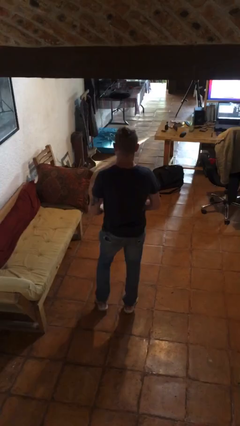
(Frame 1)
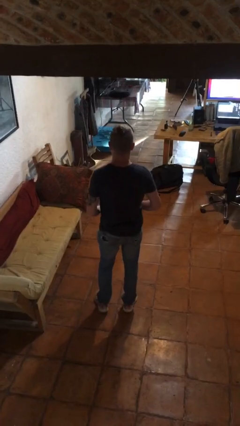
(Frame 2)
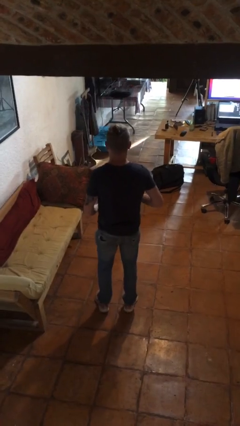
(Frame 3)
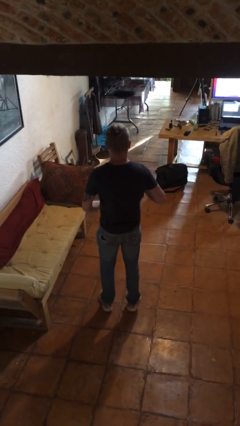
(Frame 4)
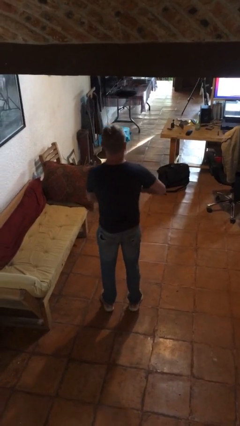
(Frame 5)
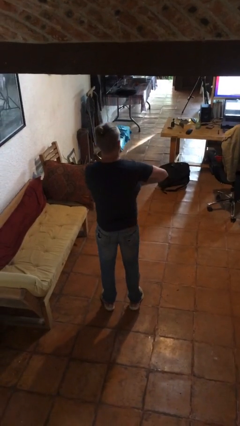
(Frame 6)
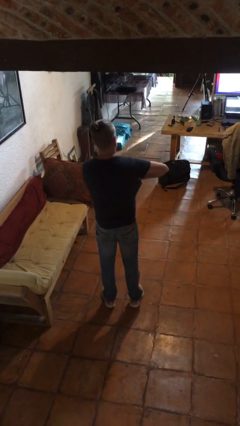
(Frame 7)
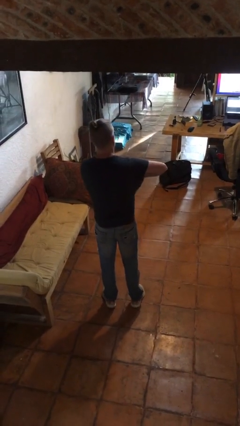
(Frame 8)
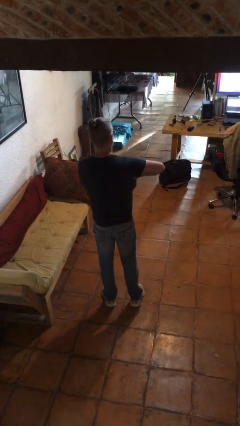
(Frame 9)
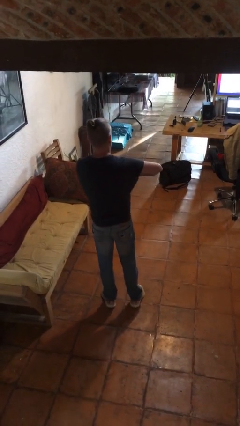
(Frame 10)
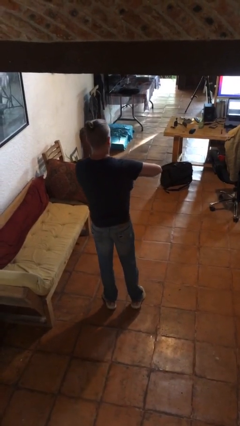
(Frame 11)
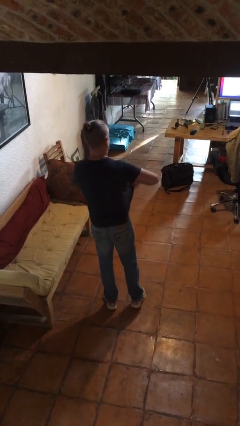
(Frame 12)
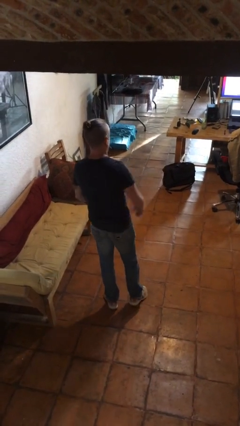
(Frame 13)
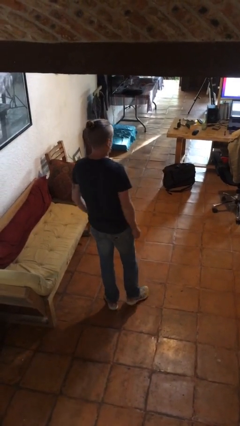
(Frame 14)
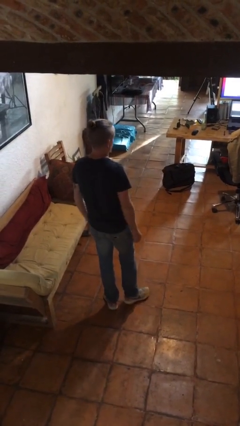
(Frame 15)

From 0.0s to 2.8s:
person applies deodorant

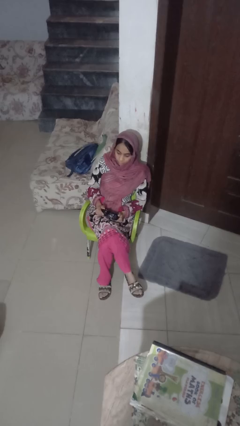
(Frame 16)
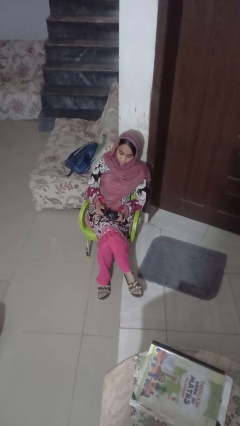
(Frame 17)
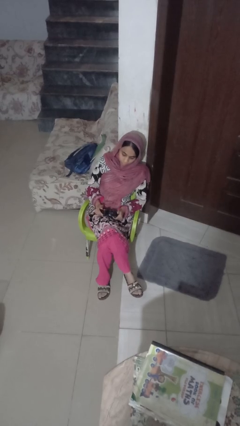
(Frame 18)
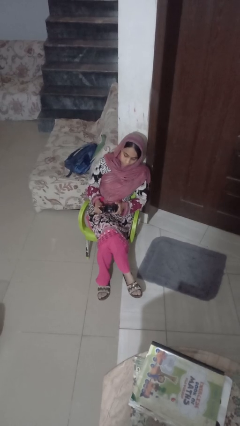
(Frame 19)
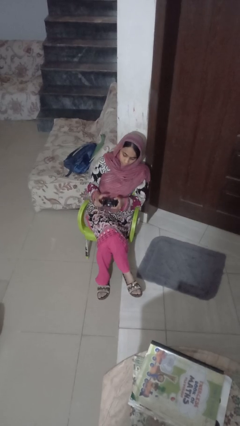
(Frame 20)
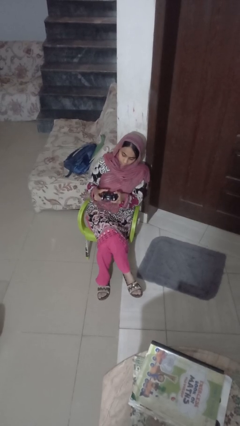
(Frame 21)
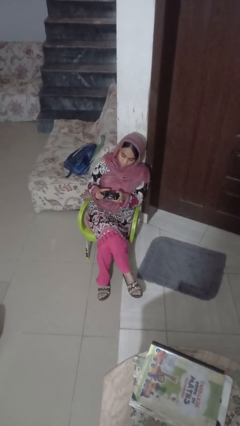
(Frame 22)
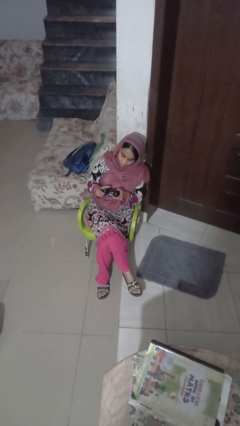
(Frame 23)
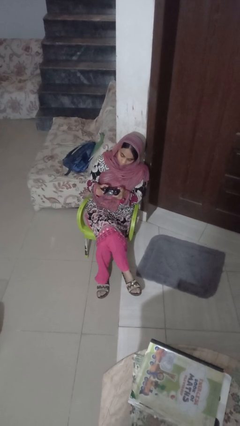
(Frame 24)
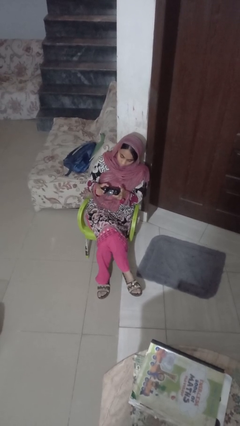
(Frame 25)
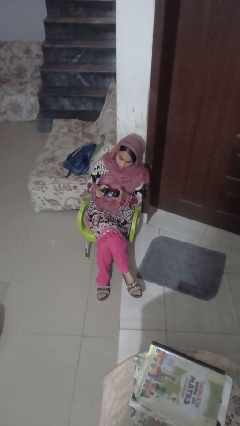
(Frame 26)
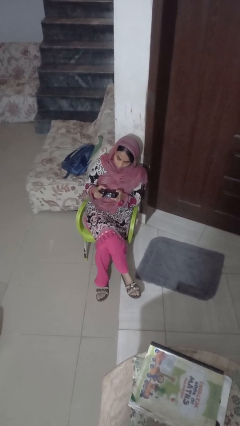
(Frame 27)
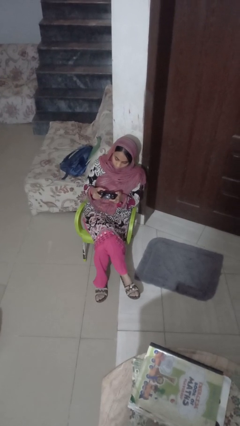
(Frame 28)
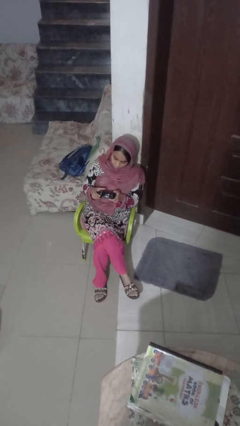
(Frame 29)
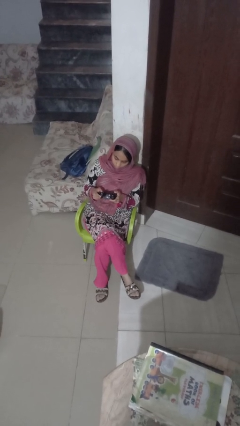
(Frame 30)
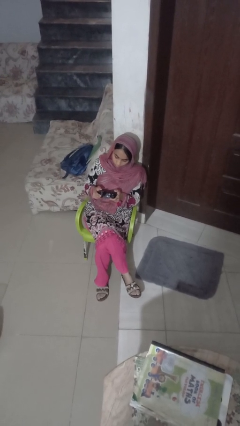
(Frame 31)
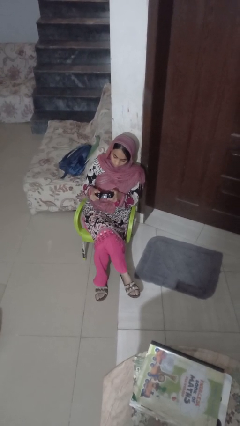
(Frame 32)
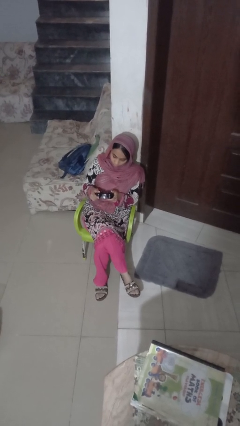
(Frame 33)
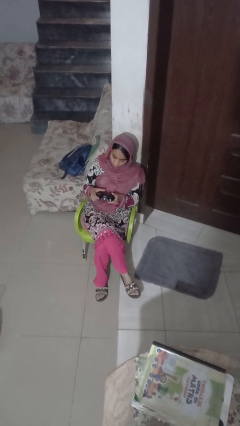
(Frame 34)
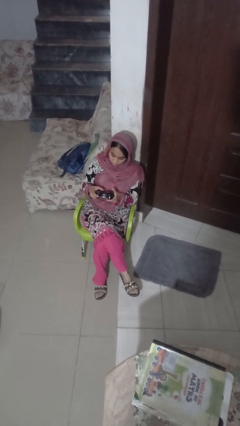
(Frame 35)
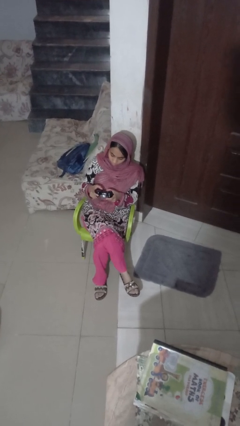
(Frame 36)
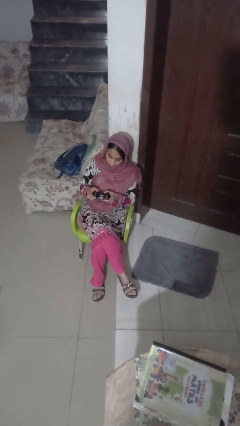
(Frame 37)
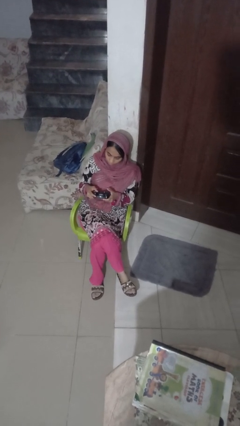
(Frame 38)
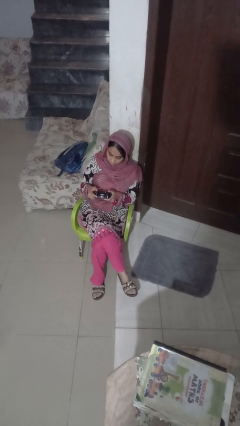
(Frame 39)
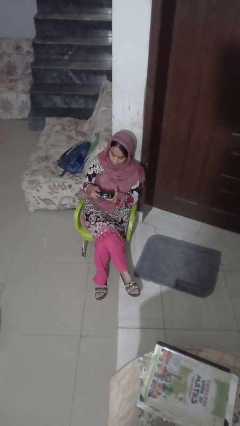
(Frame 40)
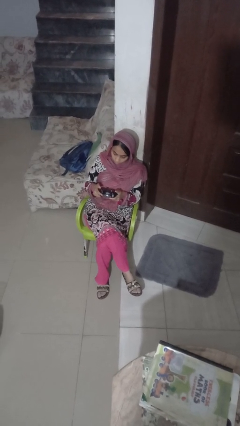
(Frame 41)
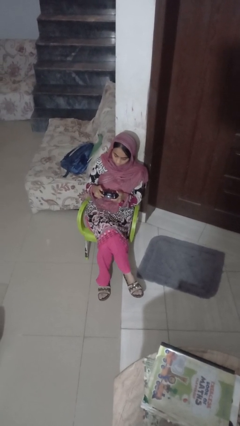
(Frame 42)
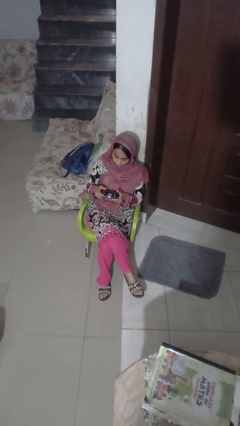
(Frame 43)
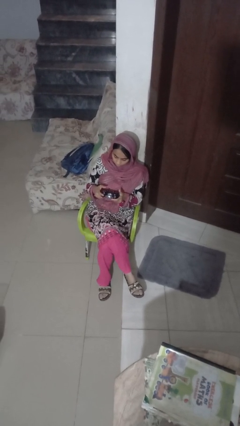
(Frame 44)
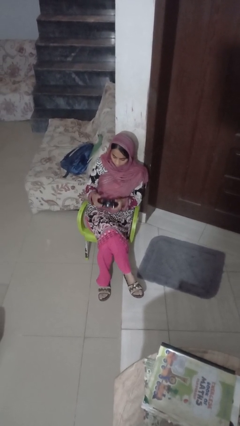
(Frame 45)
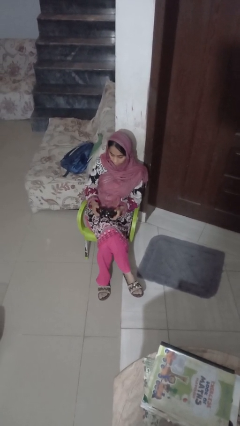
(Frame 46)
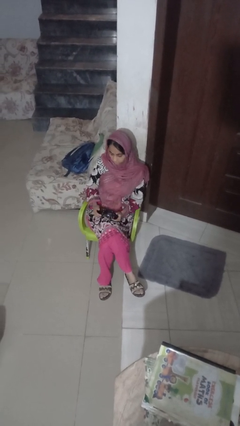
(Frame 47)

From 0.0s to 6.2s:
person interacts with handheld game

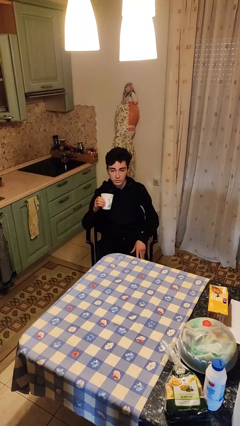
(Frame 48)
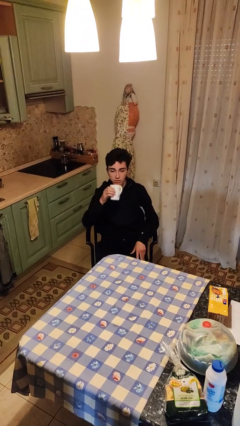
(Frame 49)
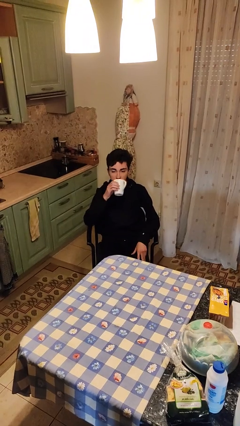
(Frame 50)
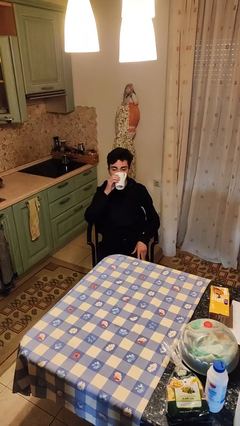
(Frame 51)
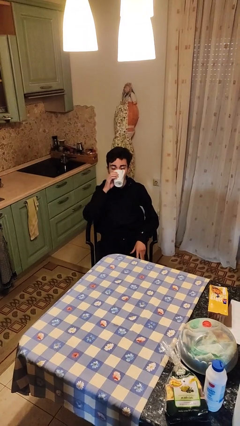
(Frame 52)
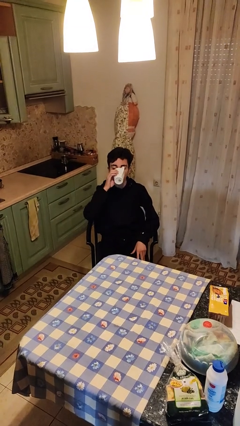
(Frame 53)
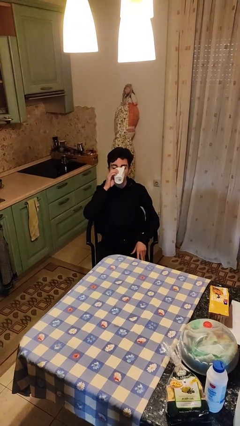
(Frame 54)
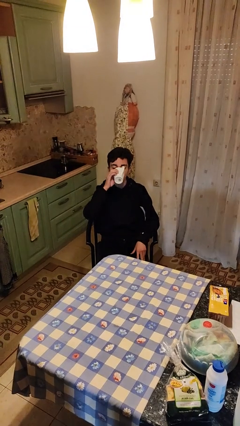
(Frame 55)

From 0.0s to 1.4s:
person drinks from mug

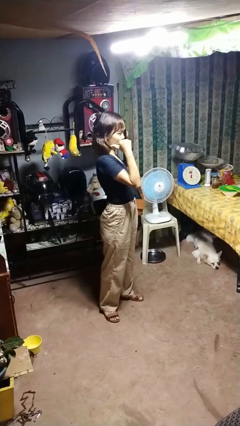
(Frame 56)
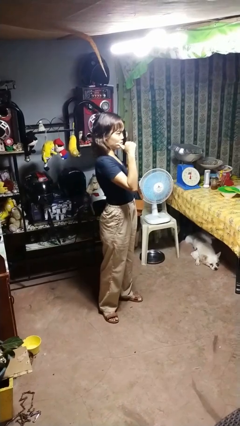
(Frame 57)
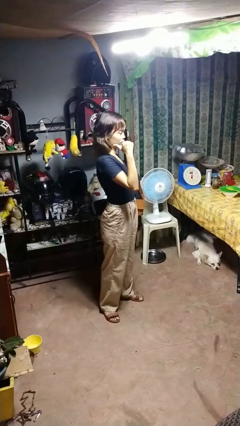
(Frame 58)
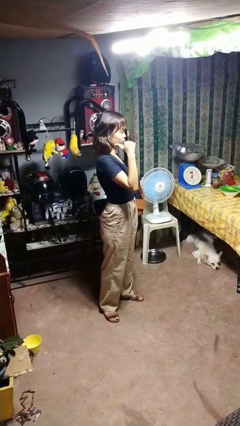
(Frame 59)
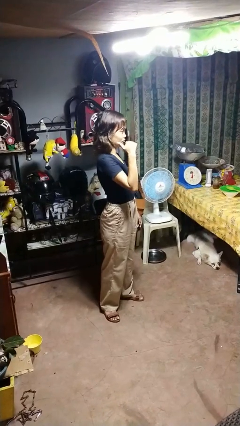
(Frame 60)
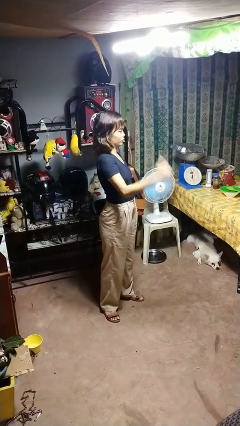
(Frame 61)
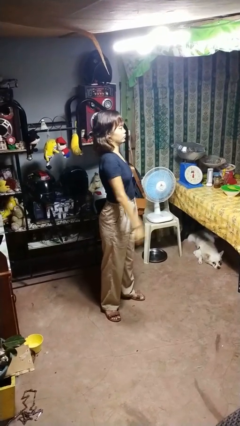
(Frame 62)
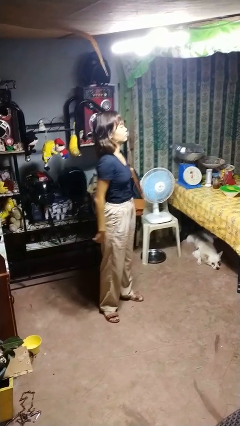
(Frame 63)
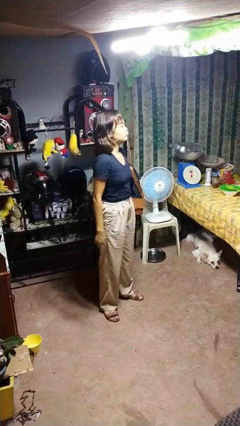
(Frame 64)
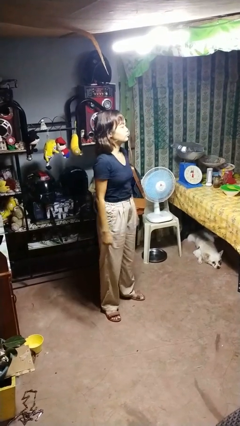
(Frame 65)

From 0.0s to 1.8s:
person gestures behind me

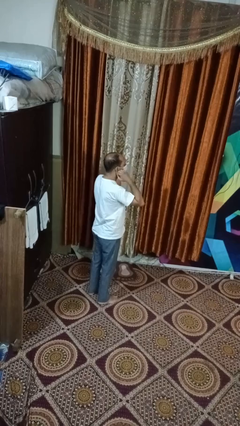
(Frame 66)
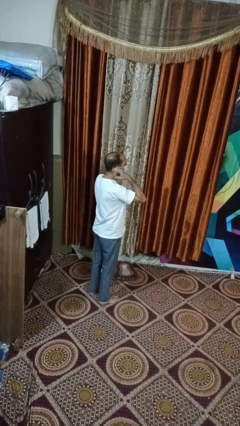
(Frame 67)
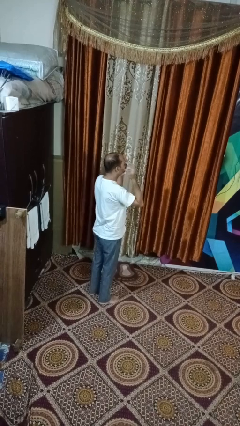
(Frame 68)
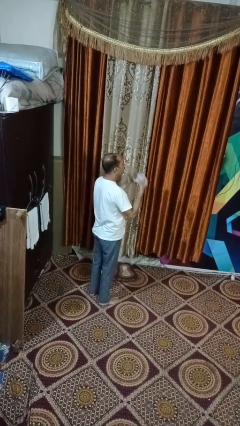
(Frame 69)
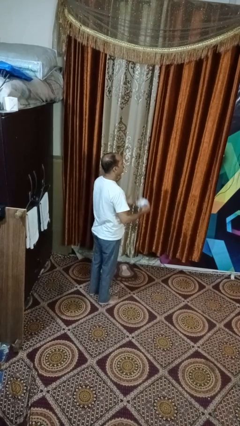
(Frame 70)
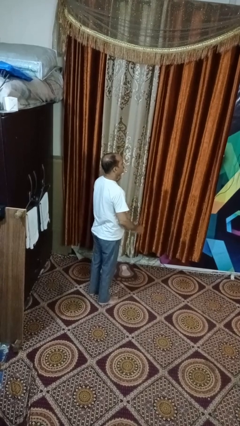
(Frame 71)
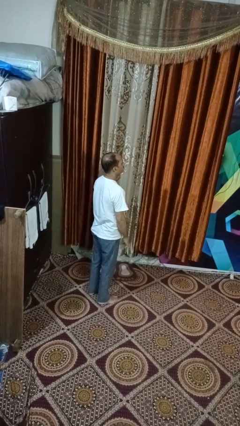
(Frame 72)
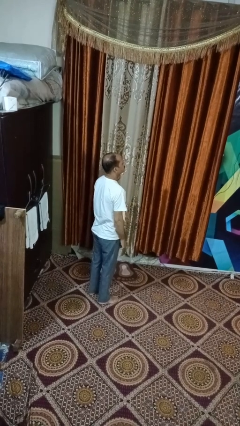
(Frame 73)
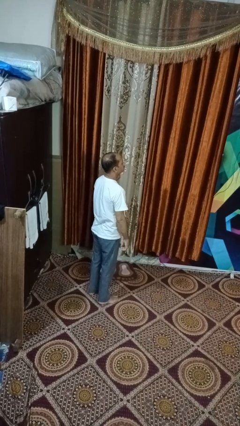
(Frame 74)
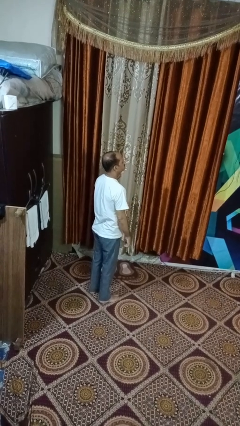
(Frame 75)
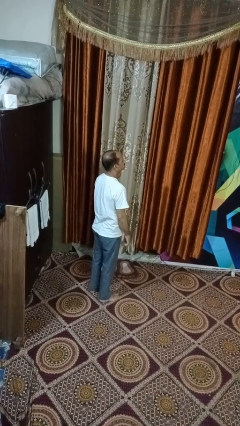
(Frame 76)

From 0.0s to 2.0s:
person takes off facemask

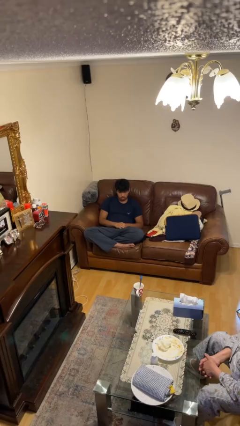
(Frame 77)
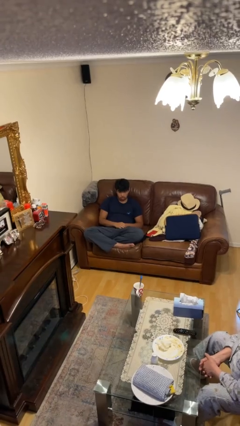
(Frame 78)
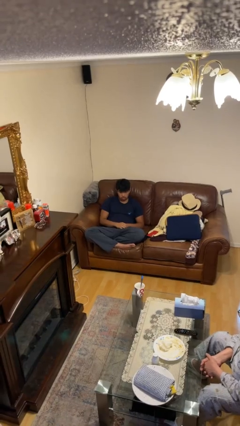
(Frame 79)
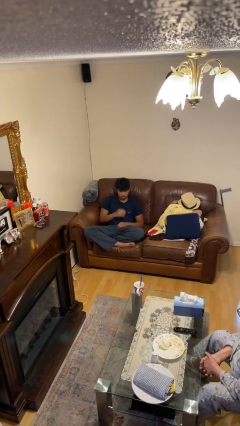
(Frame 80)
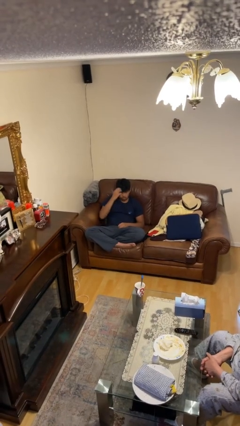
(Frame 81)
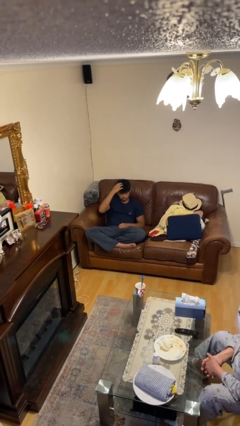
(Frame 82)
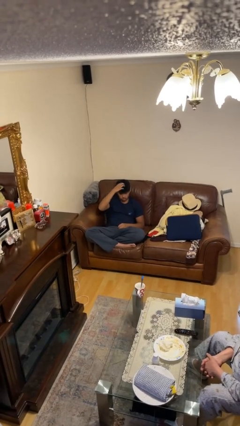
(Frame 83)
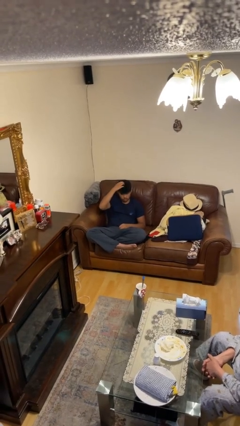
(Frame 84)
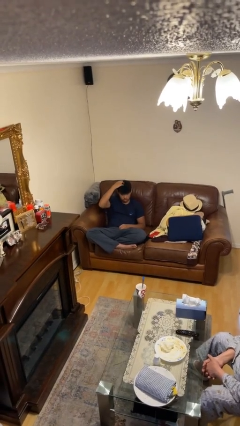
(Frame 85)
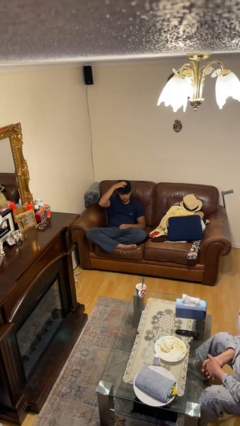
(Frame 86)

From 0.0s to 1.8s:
person strokes hair

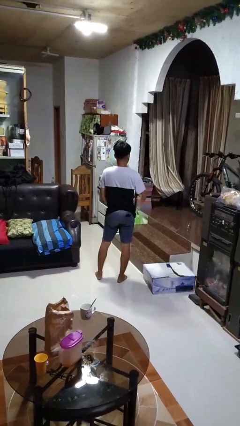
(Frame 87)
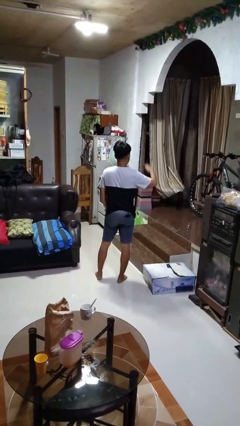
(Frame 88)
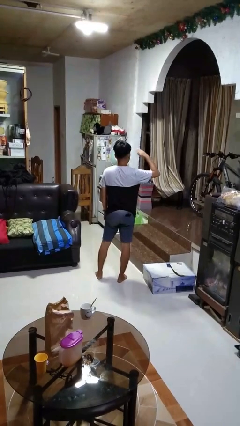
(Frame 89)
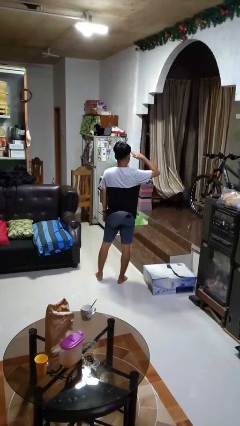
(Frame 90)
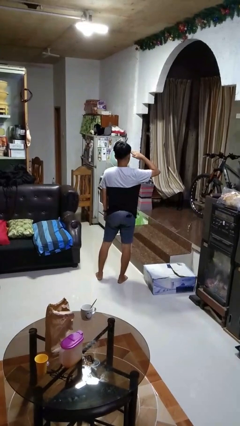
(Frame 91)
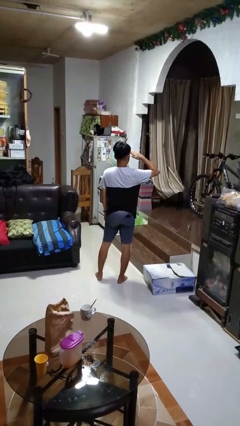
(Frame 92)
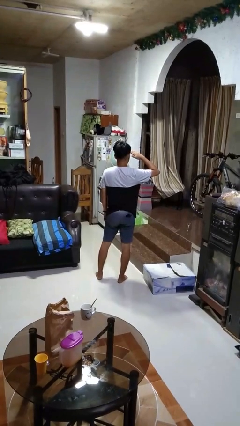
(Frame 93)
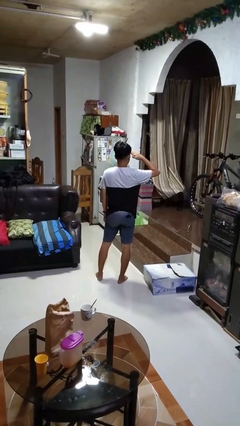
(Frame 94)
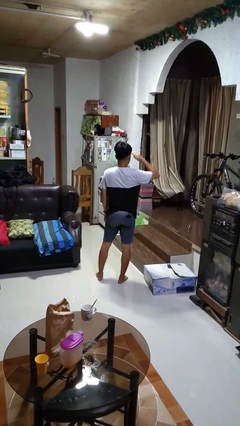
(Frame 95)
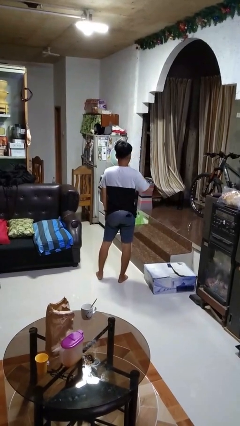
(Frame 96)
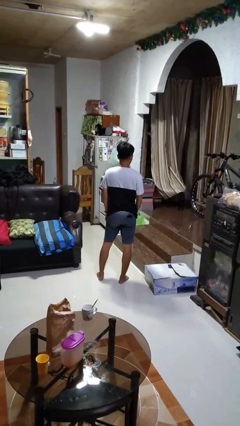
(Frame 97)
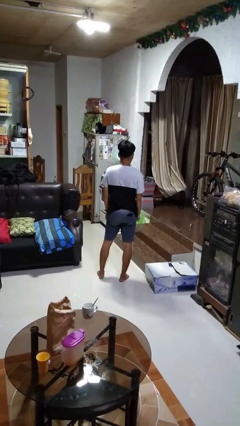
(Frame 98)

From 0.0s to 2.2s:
person salutes
